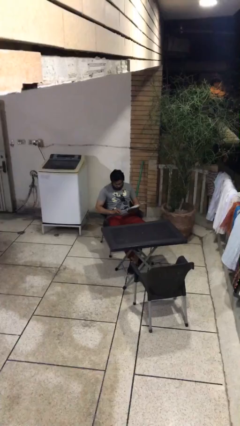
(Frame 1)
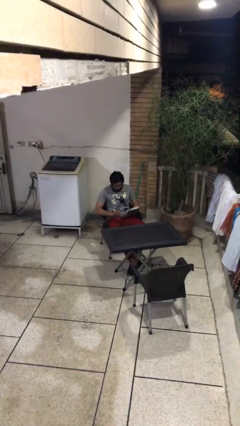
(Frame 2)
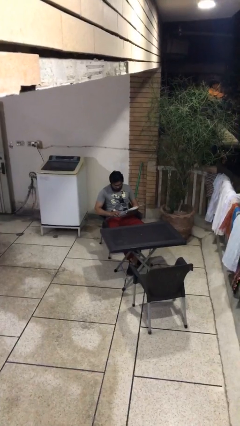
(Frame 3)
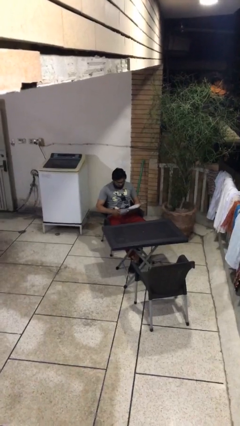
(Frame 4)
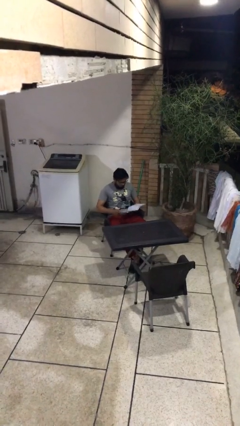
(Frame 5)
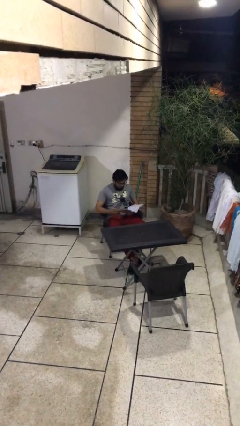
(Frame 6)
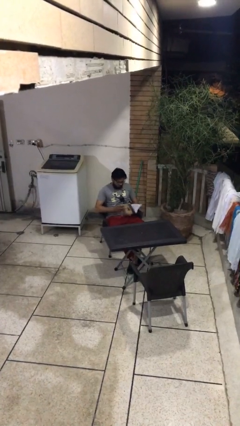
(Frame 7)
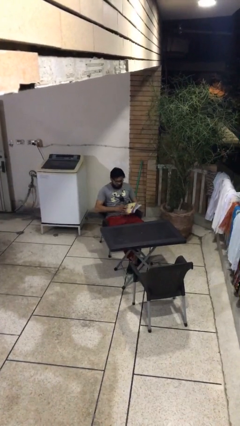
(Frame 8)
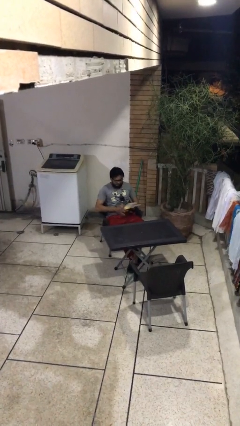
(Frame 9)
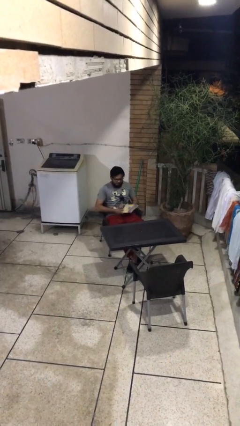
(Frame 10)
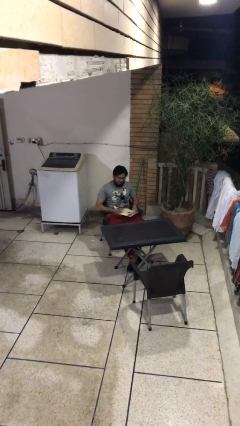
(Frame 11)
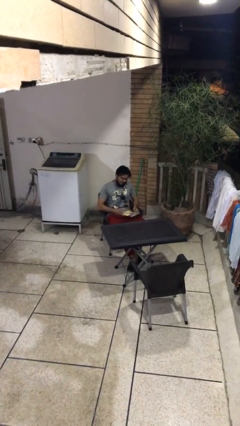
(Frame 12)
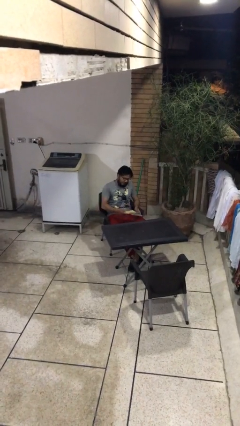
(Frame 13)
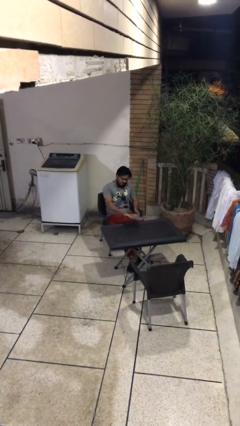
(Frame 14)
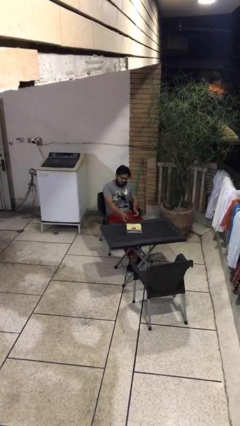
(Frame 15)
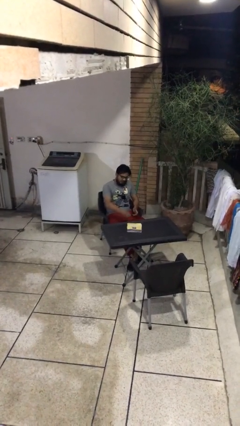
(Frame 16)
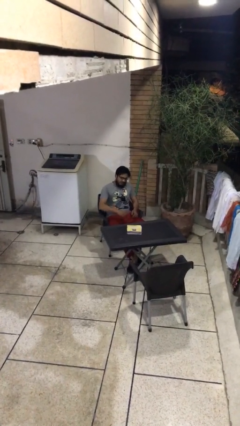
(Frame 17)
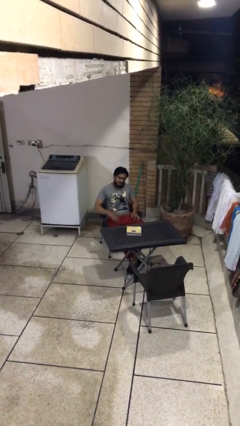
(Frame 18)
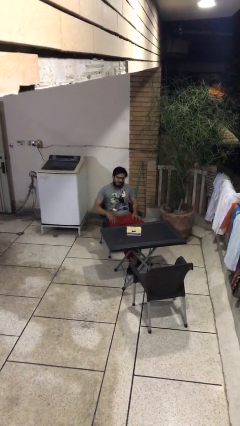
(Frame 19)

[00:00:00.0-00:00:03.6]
person puts down object on table

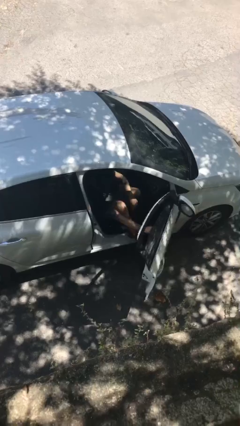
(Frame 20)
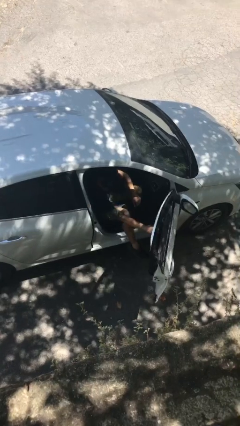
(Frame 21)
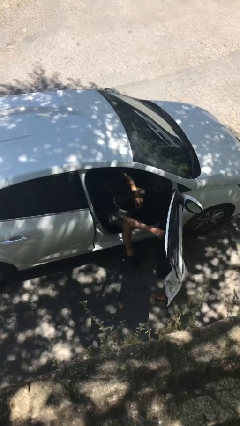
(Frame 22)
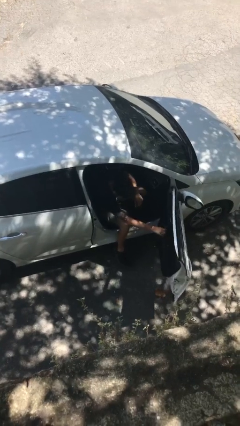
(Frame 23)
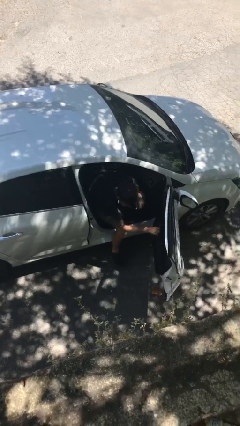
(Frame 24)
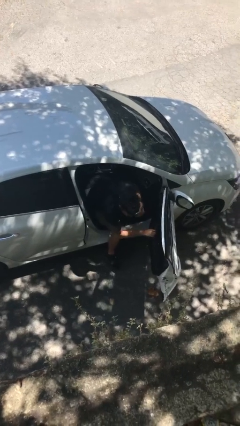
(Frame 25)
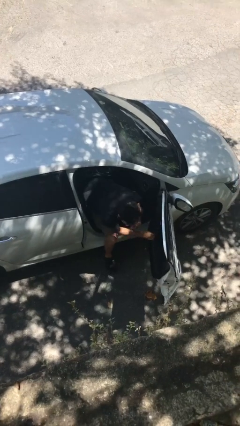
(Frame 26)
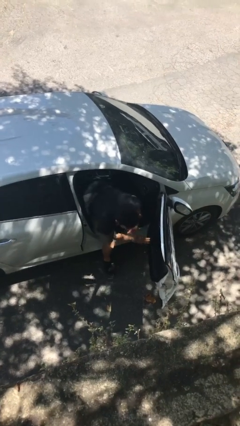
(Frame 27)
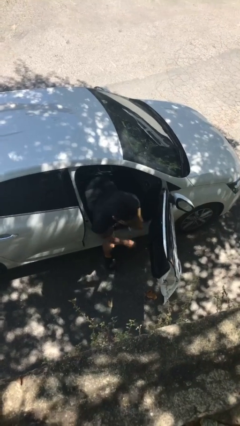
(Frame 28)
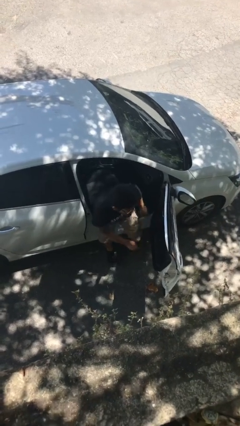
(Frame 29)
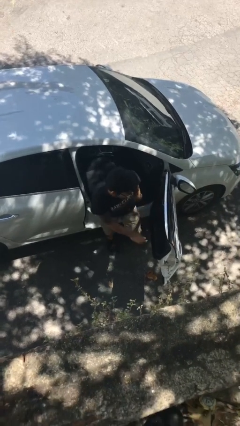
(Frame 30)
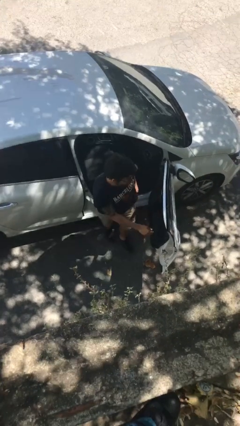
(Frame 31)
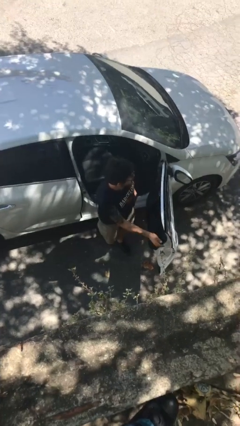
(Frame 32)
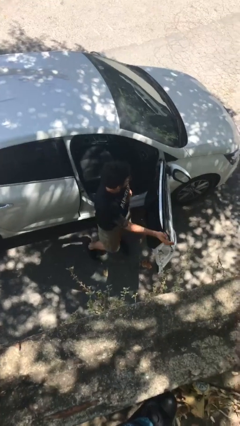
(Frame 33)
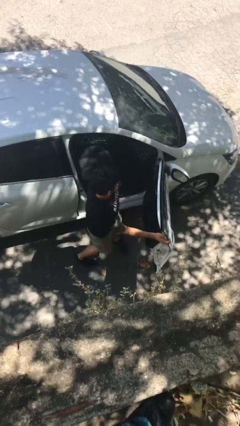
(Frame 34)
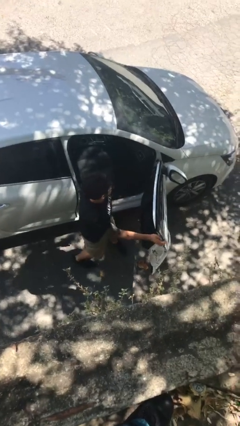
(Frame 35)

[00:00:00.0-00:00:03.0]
person exits car

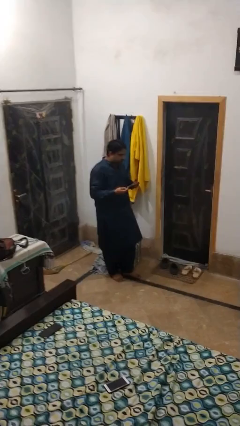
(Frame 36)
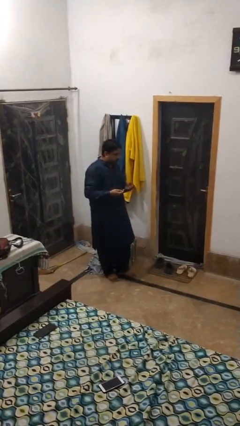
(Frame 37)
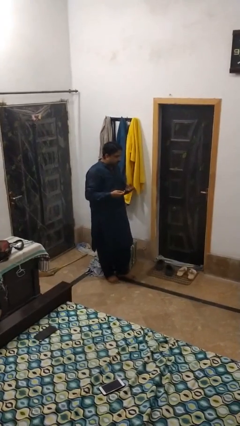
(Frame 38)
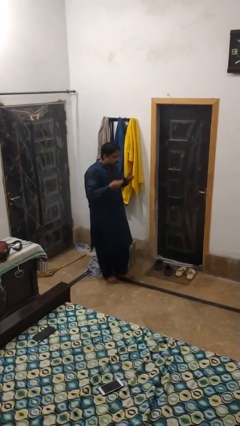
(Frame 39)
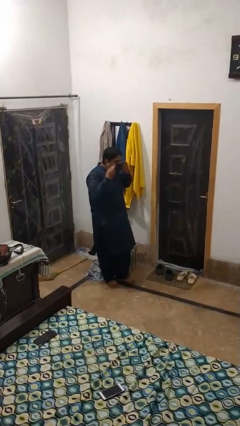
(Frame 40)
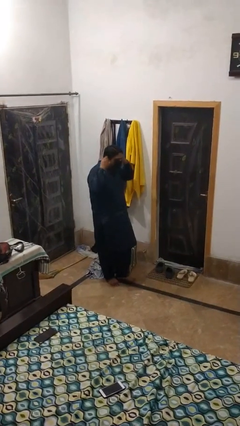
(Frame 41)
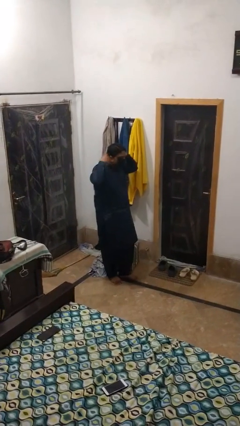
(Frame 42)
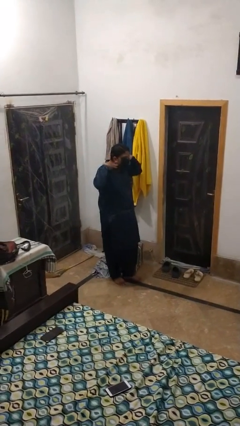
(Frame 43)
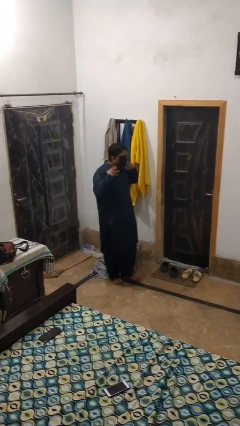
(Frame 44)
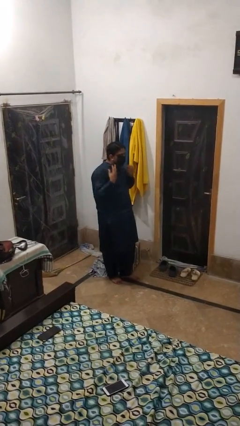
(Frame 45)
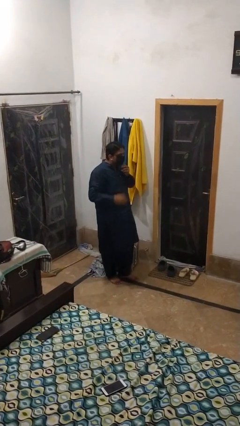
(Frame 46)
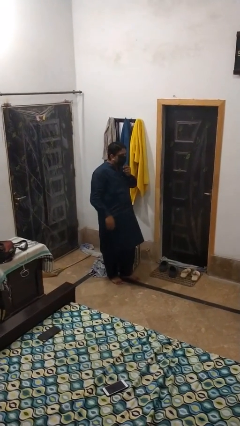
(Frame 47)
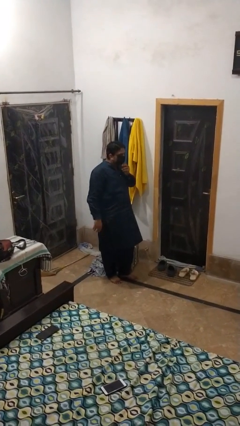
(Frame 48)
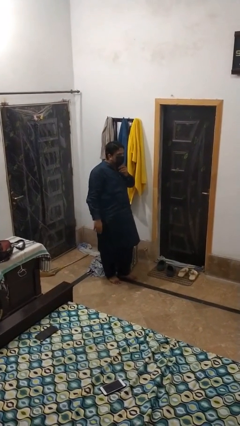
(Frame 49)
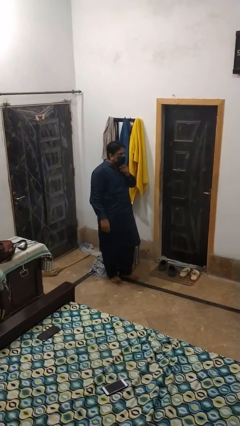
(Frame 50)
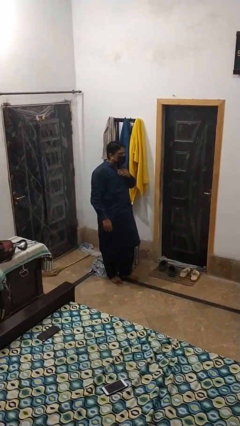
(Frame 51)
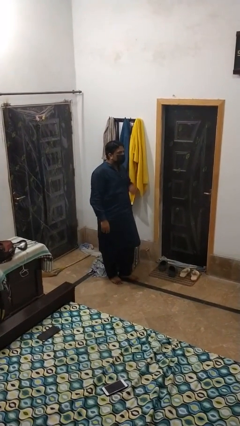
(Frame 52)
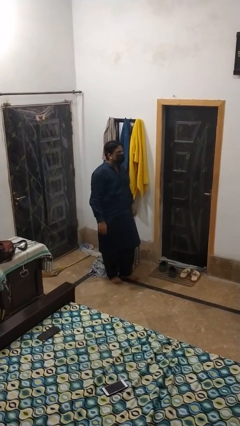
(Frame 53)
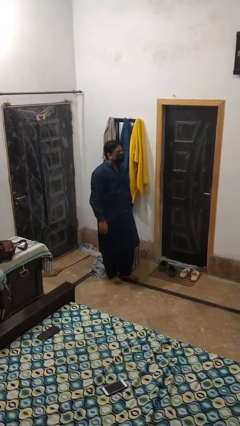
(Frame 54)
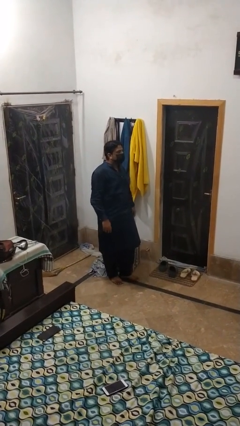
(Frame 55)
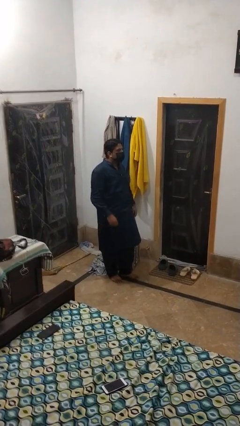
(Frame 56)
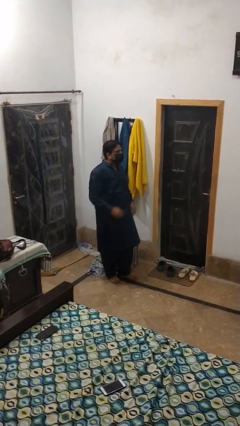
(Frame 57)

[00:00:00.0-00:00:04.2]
person puts on facemask

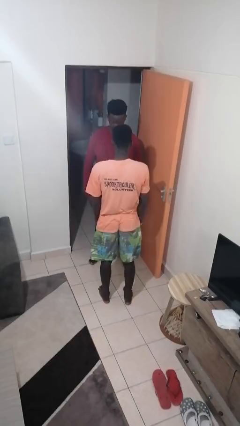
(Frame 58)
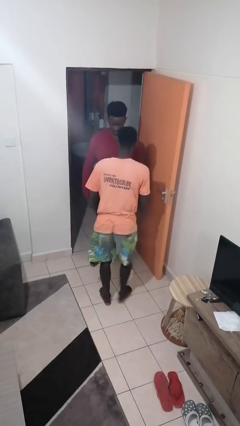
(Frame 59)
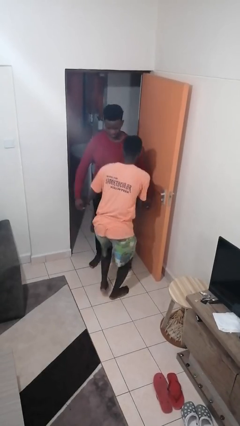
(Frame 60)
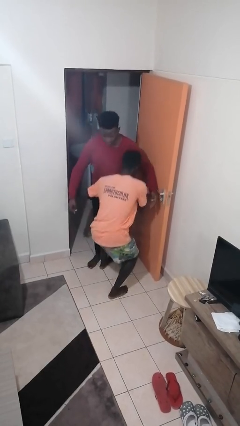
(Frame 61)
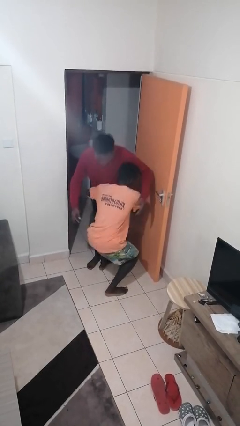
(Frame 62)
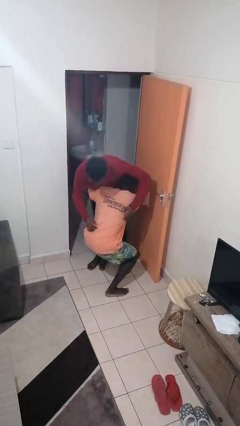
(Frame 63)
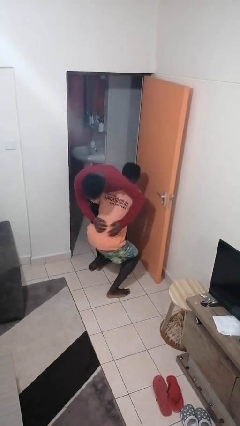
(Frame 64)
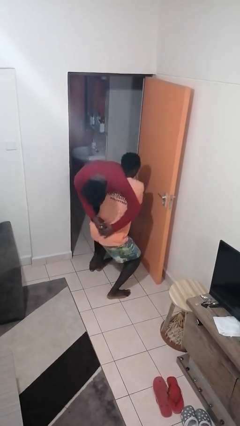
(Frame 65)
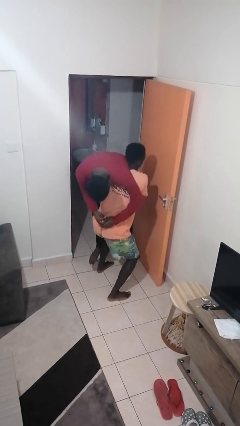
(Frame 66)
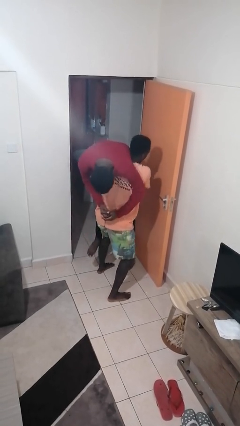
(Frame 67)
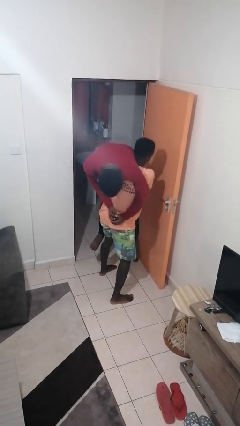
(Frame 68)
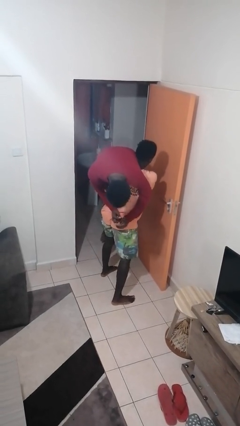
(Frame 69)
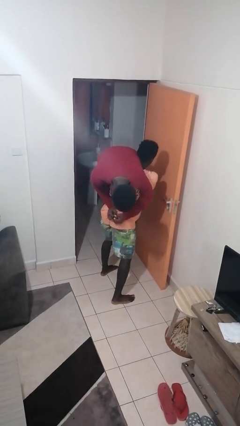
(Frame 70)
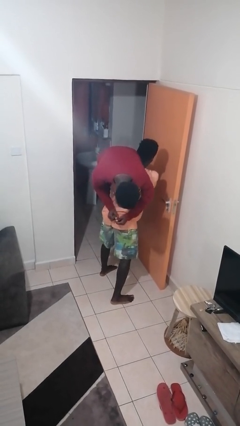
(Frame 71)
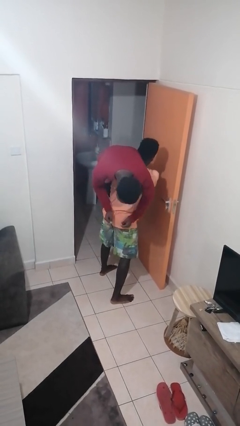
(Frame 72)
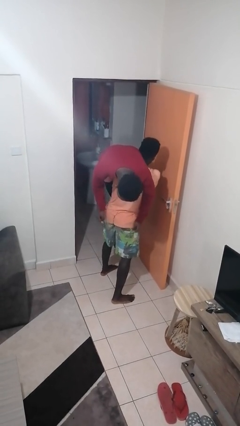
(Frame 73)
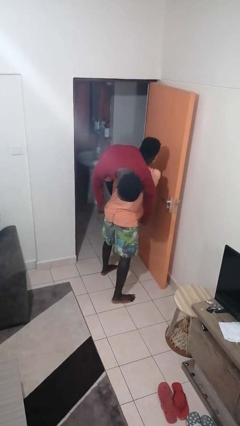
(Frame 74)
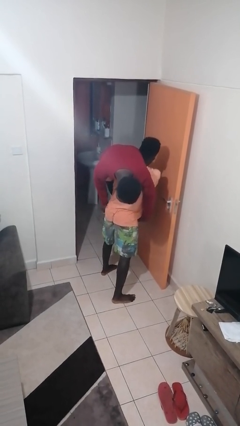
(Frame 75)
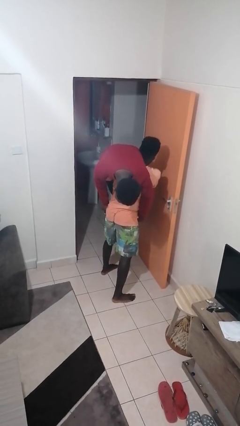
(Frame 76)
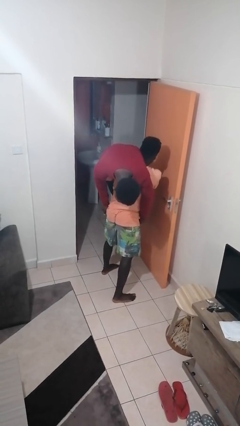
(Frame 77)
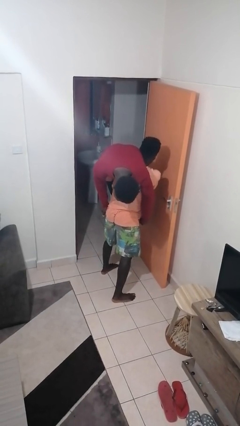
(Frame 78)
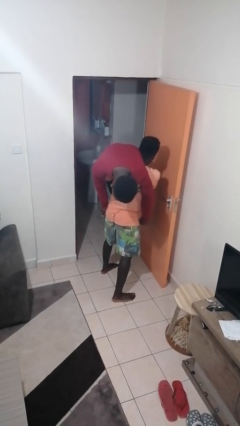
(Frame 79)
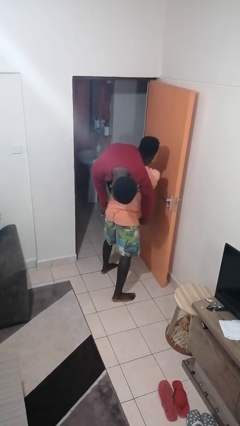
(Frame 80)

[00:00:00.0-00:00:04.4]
person carries person over shoulder

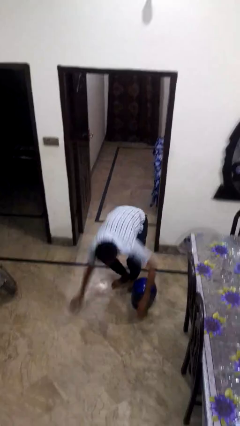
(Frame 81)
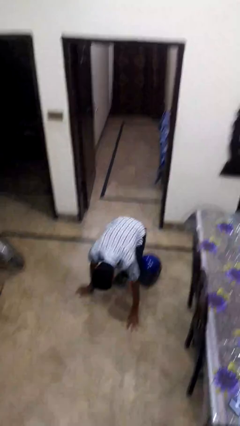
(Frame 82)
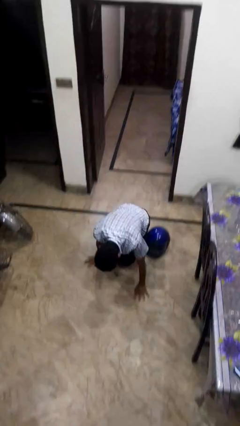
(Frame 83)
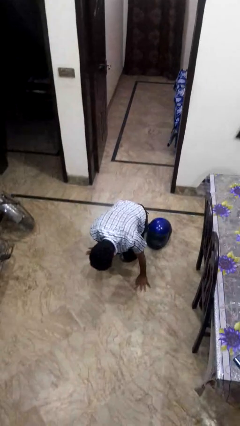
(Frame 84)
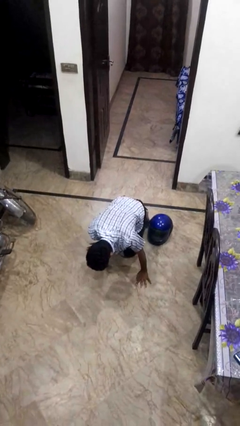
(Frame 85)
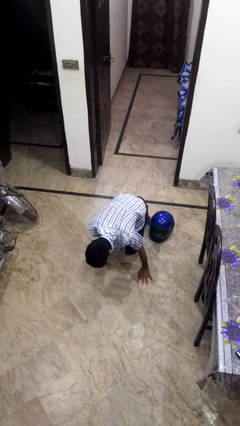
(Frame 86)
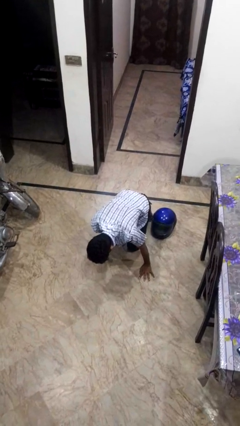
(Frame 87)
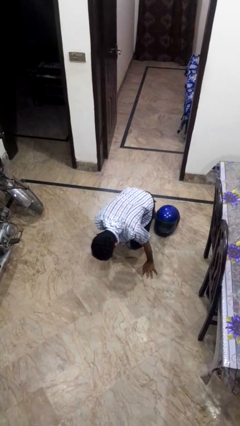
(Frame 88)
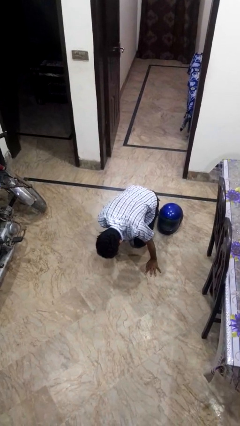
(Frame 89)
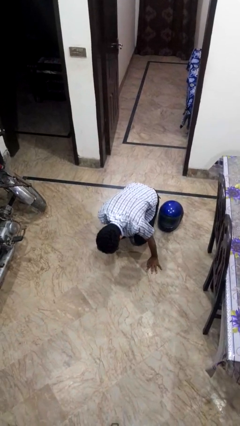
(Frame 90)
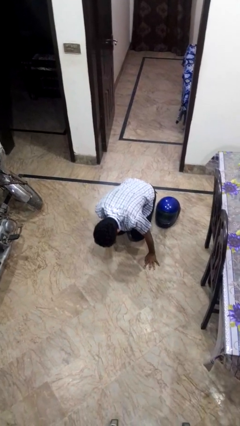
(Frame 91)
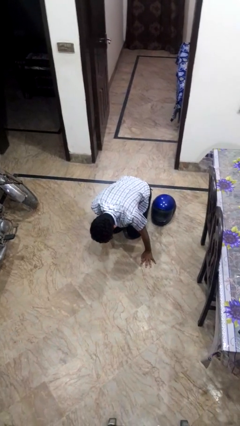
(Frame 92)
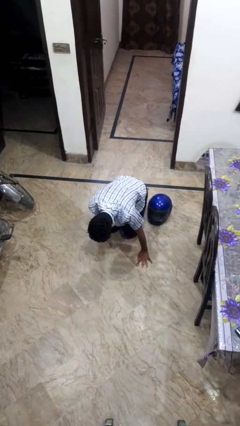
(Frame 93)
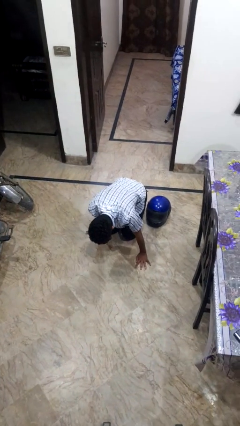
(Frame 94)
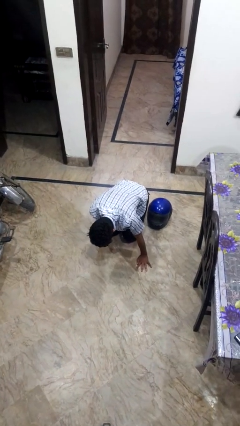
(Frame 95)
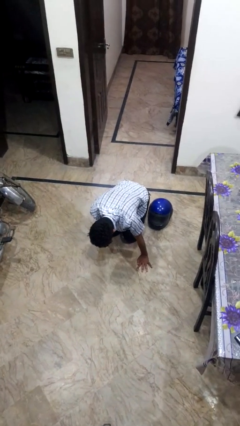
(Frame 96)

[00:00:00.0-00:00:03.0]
person trips on object on floor
